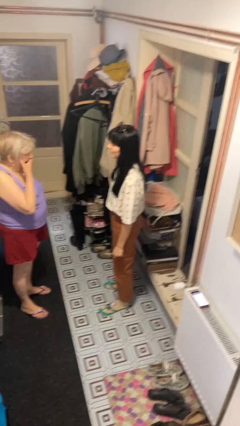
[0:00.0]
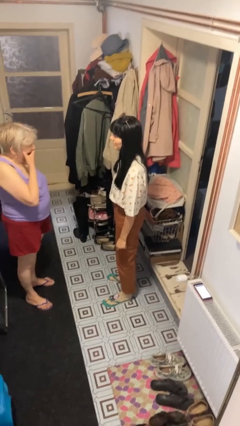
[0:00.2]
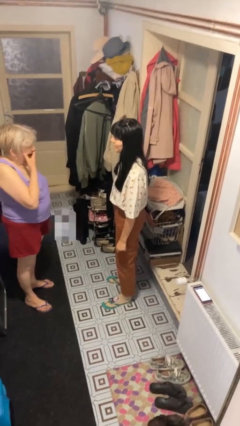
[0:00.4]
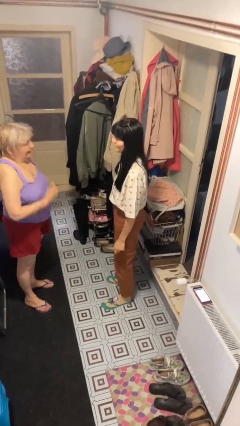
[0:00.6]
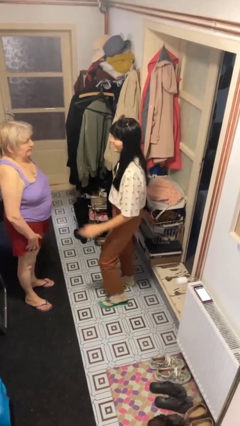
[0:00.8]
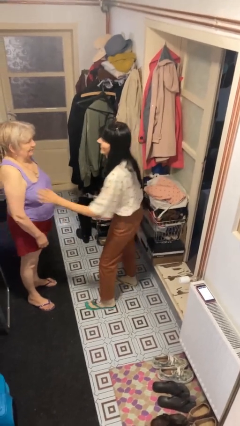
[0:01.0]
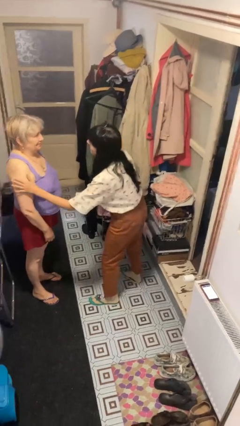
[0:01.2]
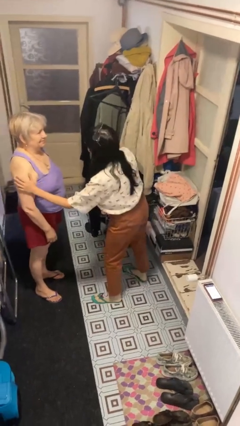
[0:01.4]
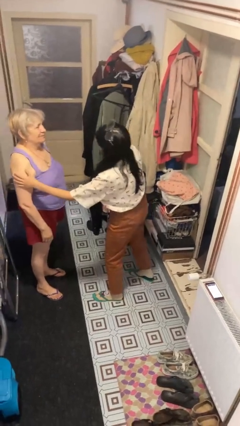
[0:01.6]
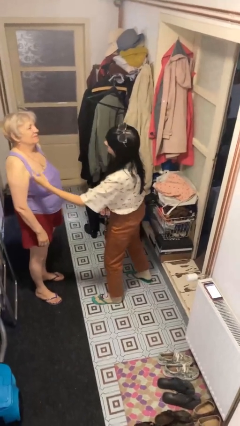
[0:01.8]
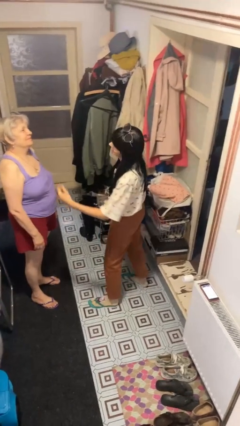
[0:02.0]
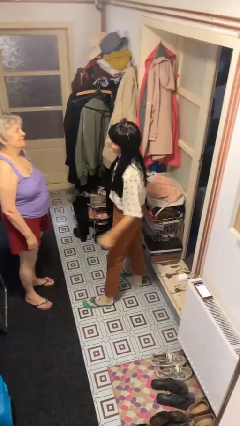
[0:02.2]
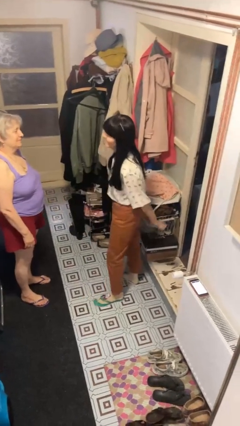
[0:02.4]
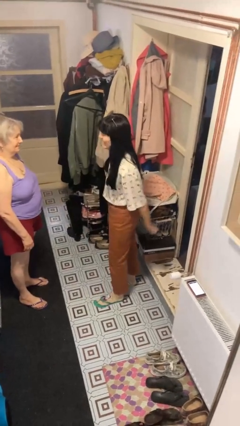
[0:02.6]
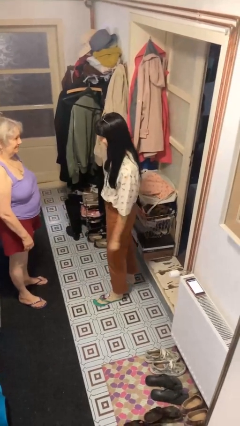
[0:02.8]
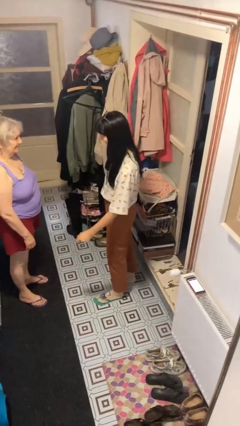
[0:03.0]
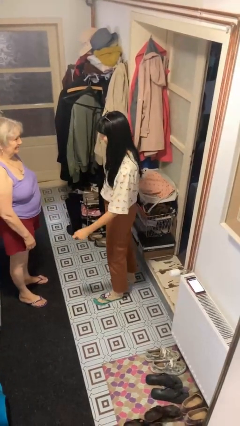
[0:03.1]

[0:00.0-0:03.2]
person shoves person

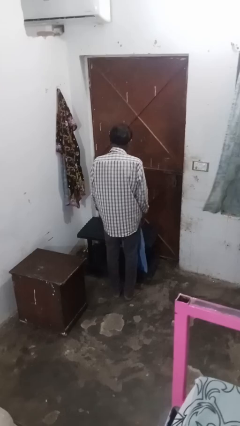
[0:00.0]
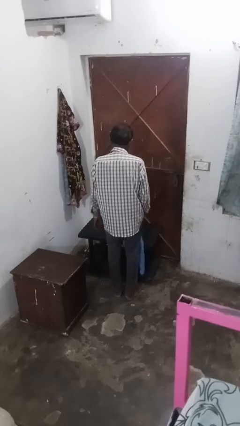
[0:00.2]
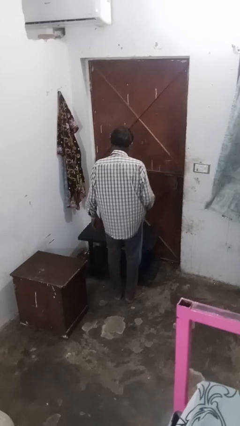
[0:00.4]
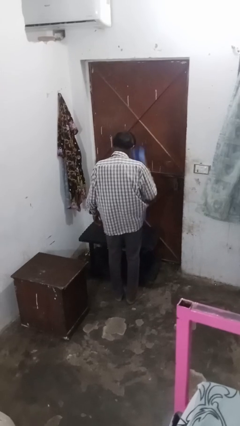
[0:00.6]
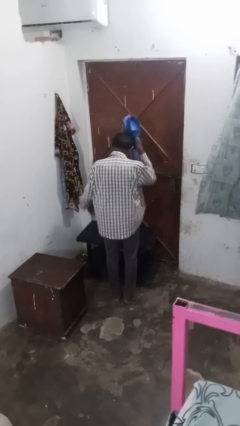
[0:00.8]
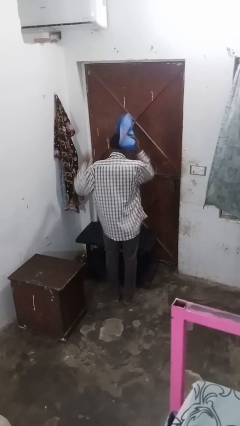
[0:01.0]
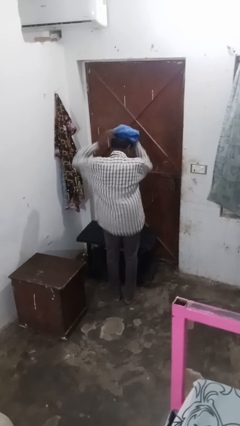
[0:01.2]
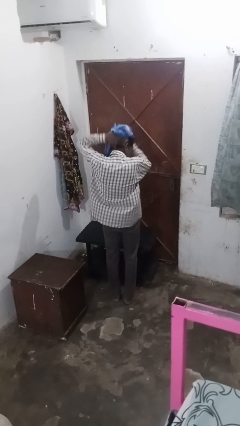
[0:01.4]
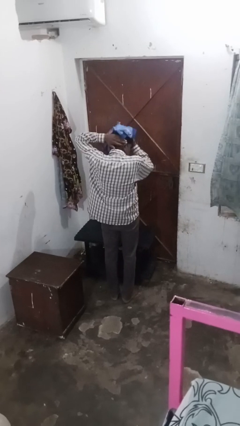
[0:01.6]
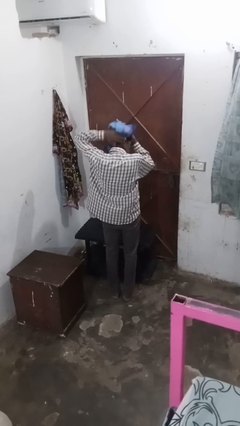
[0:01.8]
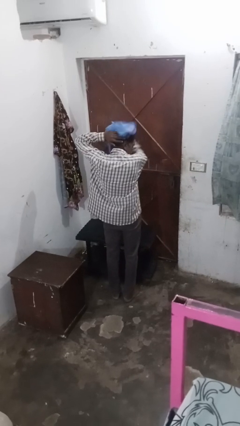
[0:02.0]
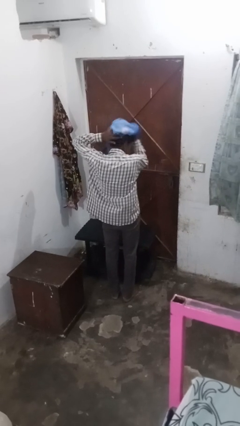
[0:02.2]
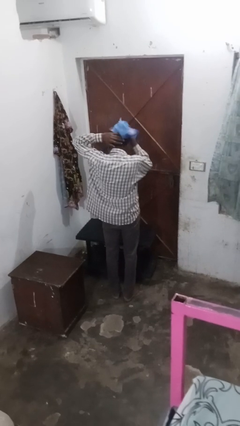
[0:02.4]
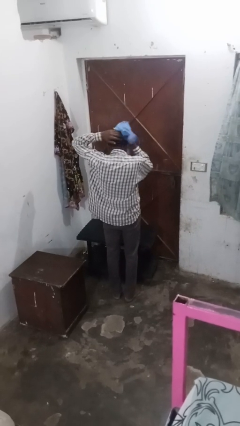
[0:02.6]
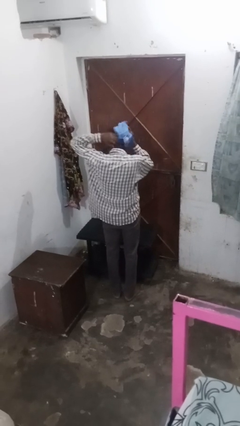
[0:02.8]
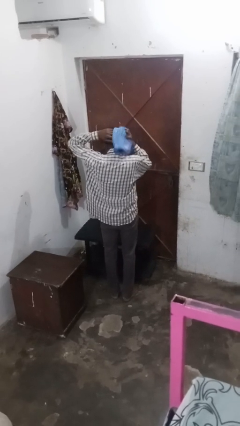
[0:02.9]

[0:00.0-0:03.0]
person dries hair with towel

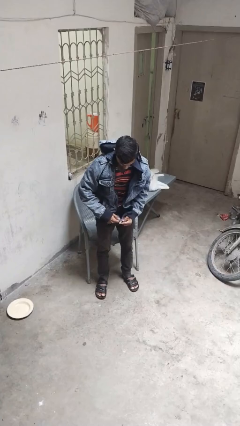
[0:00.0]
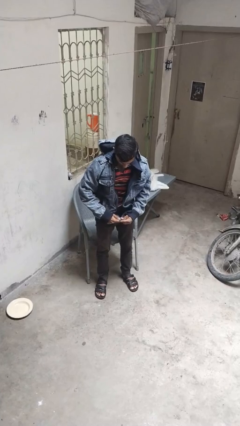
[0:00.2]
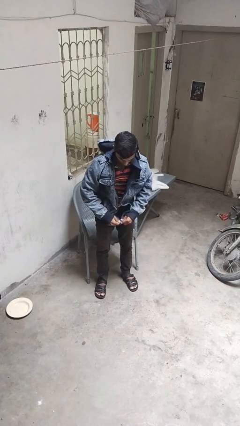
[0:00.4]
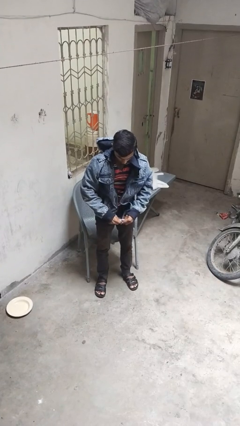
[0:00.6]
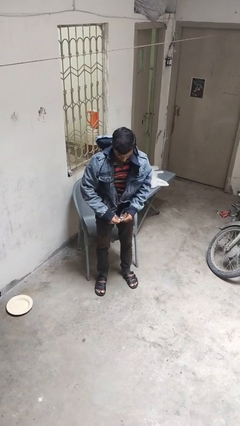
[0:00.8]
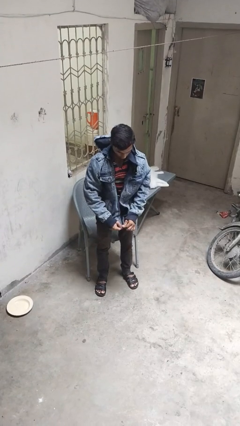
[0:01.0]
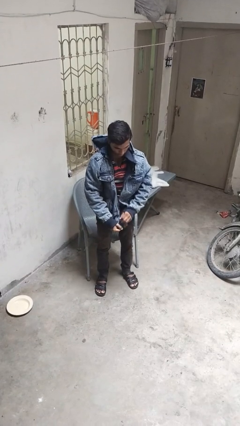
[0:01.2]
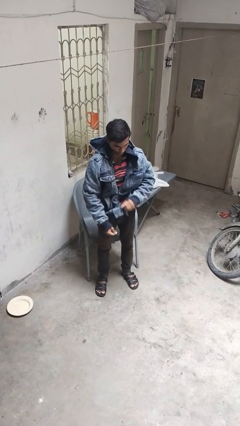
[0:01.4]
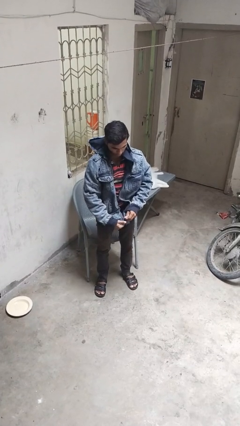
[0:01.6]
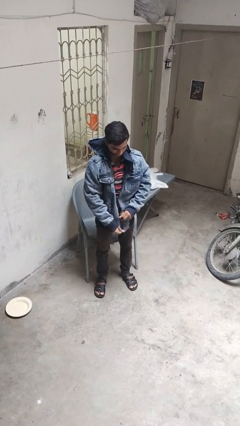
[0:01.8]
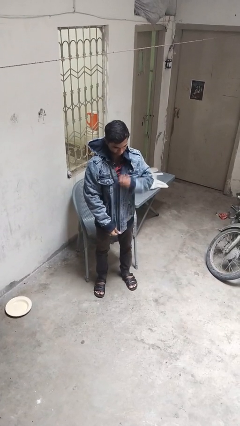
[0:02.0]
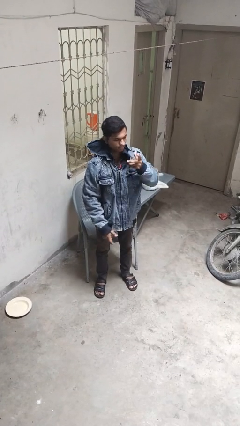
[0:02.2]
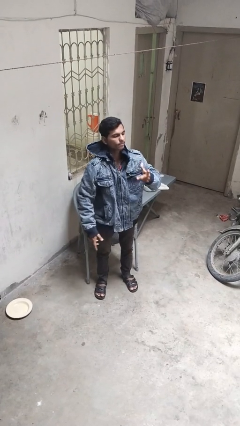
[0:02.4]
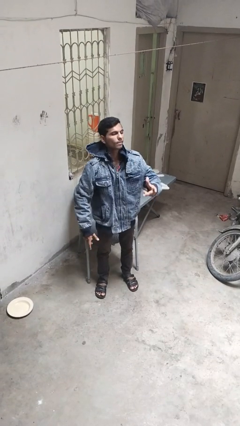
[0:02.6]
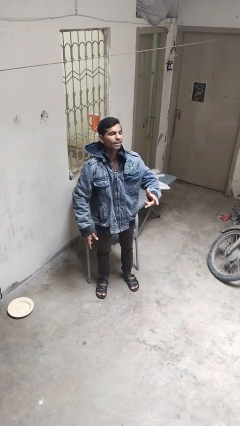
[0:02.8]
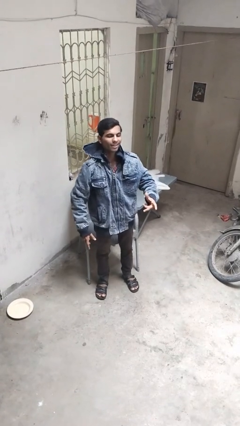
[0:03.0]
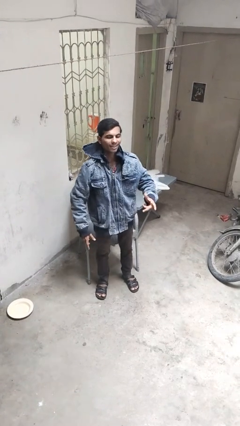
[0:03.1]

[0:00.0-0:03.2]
person zips up jacket

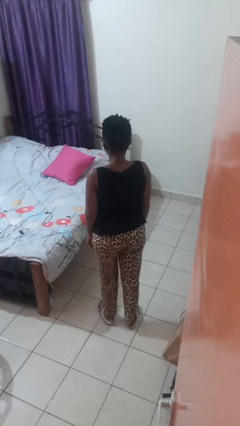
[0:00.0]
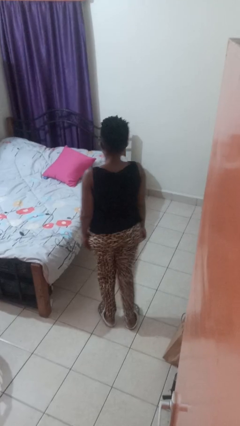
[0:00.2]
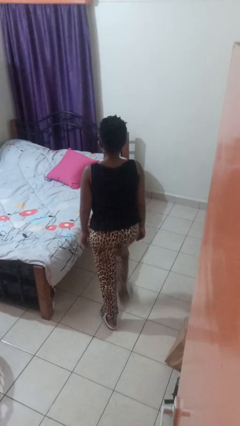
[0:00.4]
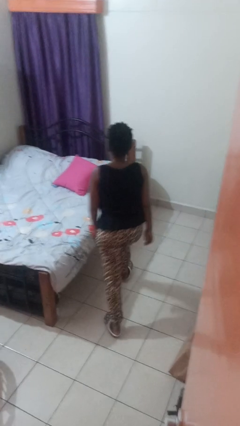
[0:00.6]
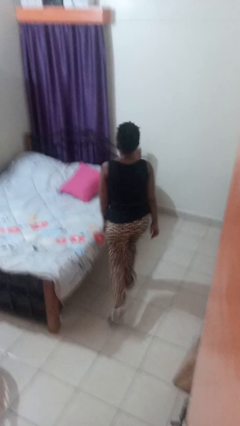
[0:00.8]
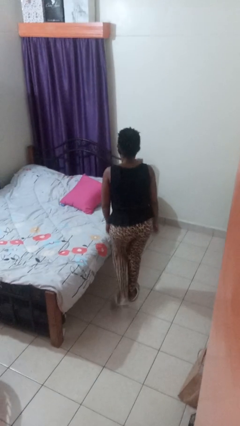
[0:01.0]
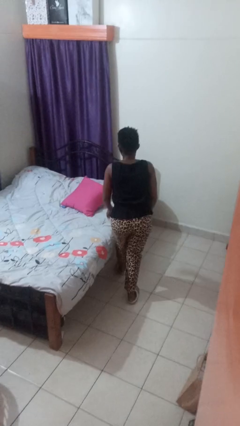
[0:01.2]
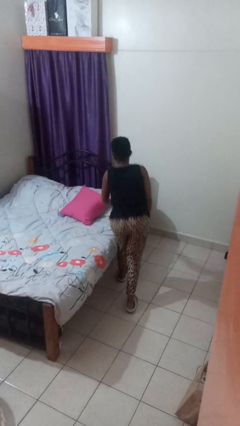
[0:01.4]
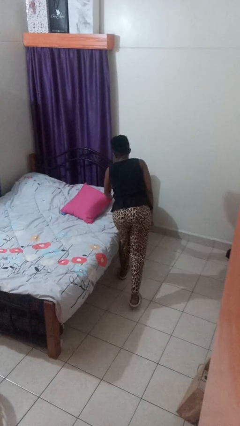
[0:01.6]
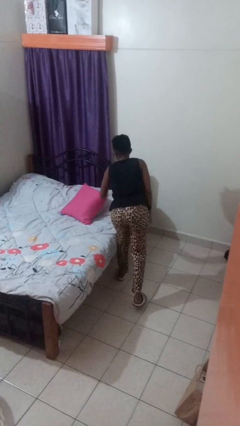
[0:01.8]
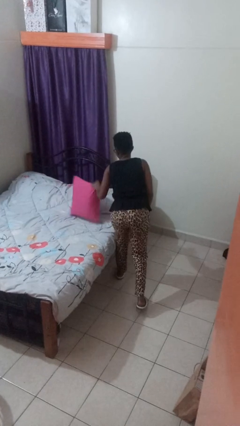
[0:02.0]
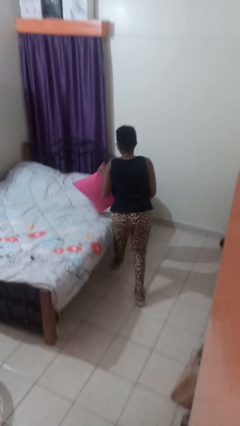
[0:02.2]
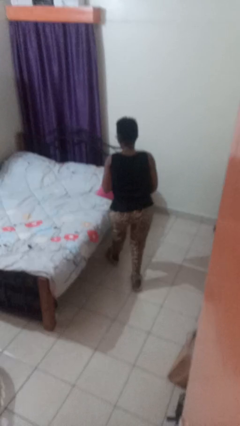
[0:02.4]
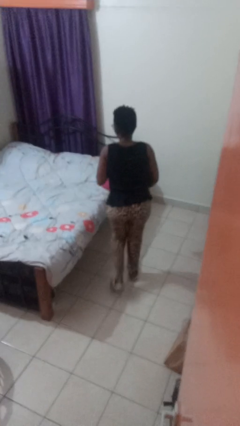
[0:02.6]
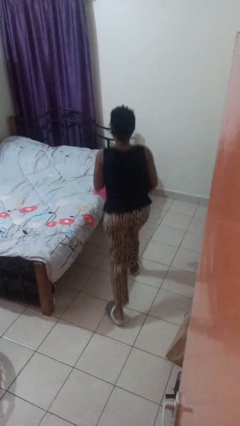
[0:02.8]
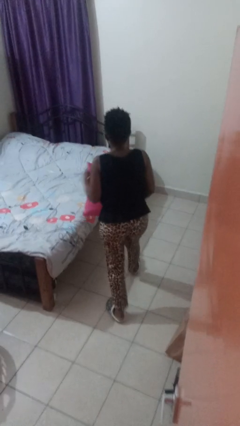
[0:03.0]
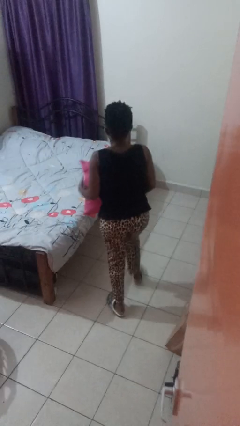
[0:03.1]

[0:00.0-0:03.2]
person picks up object from bed

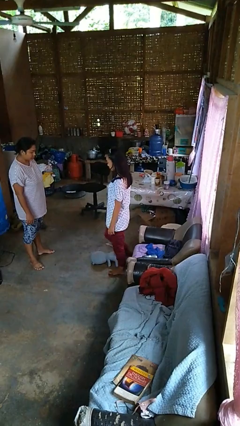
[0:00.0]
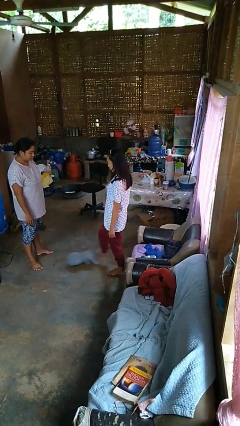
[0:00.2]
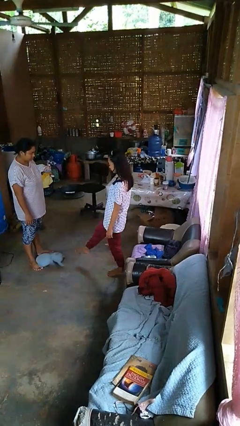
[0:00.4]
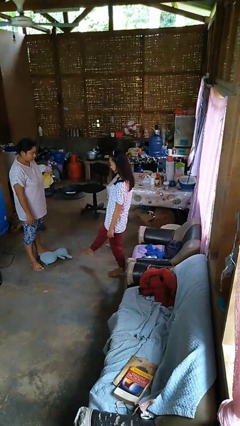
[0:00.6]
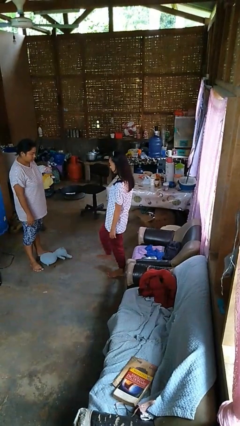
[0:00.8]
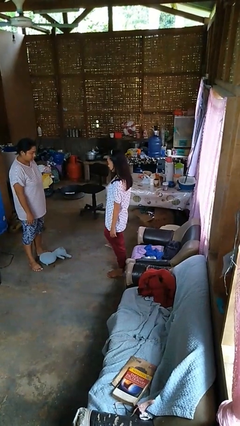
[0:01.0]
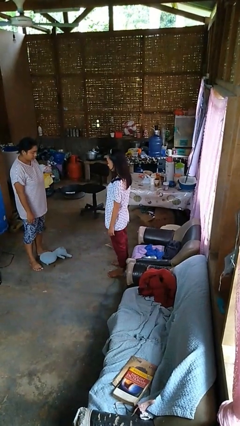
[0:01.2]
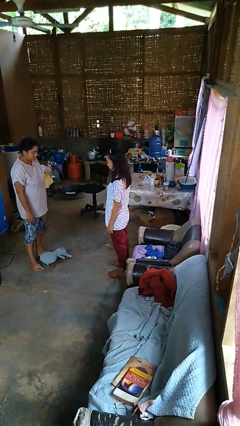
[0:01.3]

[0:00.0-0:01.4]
person kicks object to person

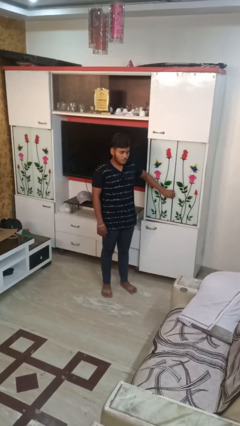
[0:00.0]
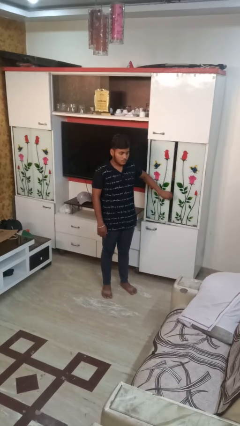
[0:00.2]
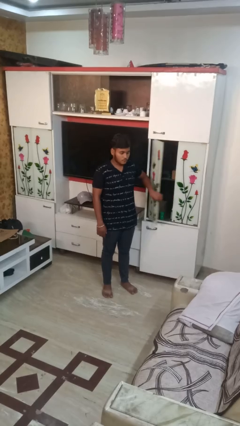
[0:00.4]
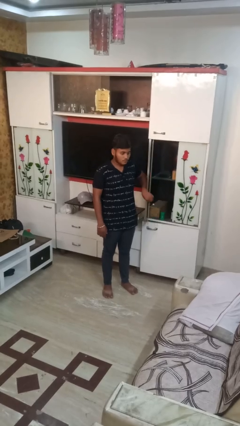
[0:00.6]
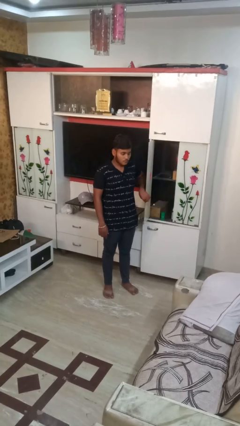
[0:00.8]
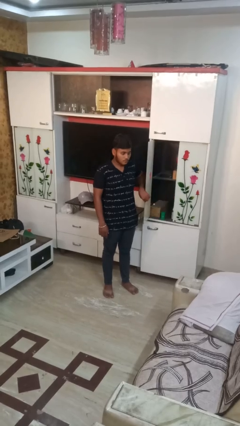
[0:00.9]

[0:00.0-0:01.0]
person opens closet door

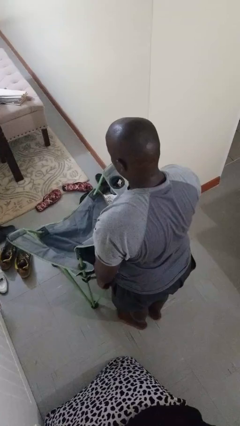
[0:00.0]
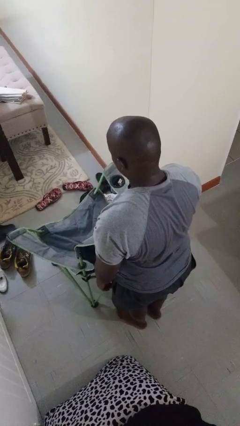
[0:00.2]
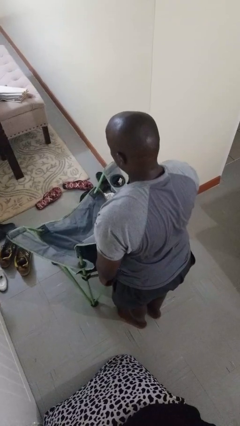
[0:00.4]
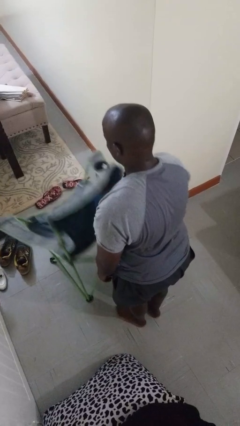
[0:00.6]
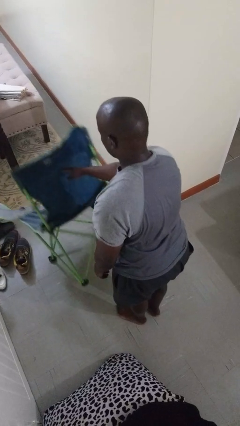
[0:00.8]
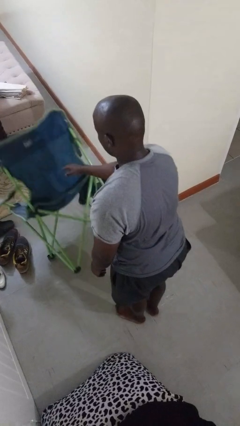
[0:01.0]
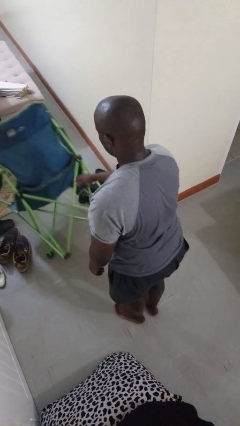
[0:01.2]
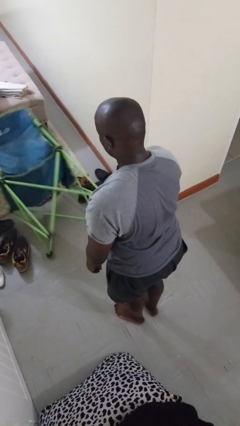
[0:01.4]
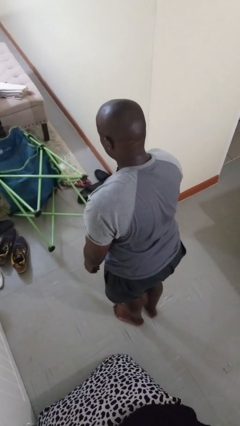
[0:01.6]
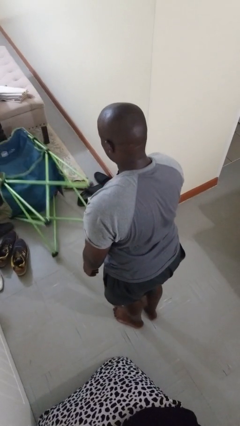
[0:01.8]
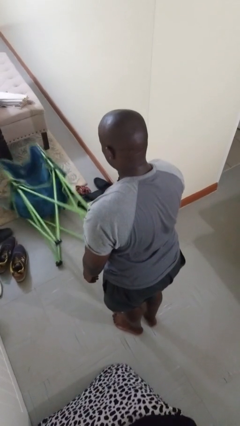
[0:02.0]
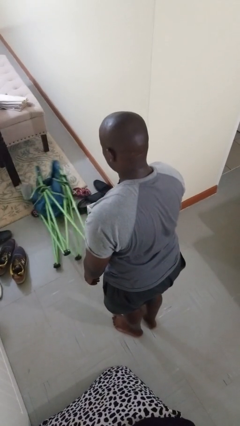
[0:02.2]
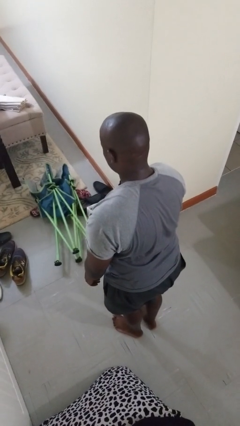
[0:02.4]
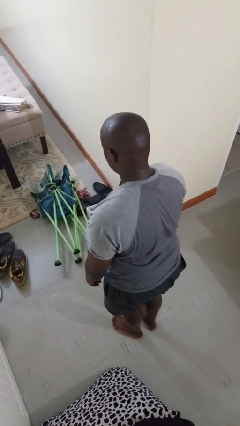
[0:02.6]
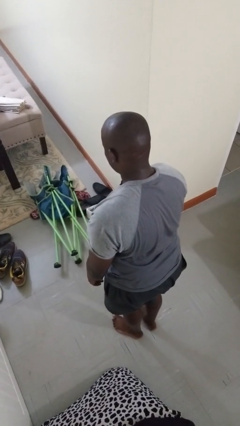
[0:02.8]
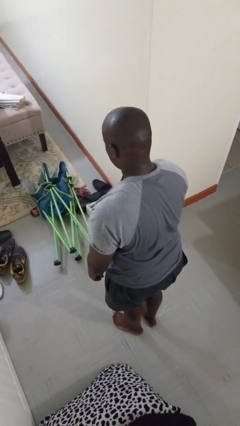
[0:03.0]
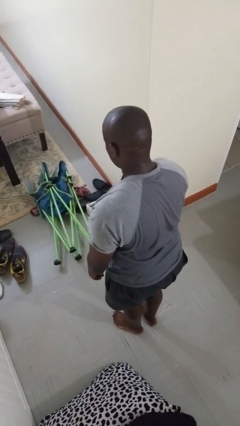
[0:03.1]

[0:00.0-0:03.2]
person knocks over furniture
